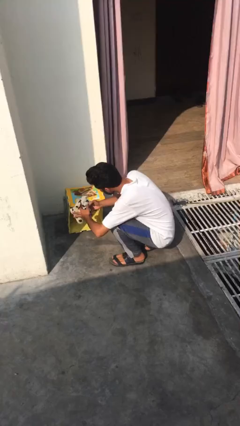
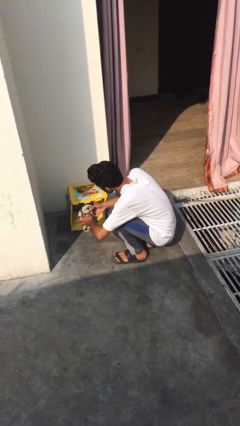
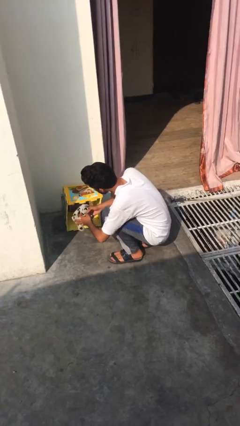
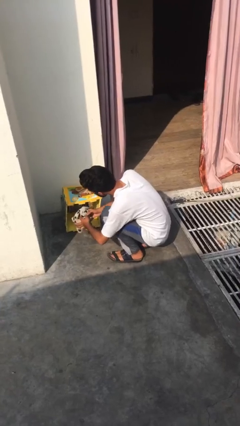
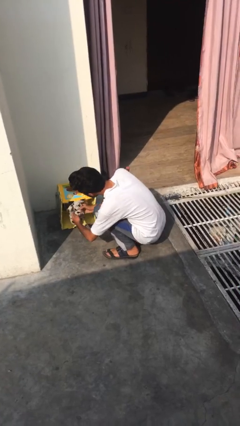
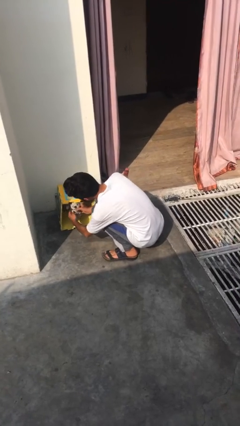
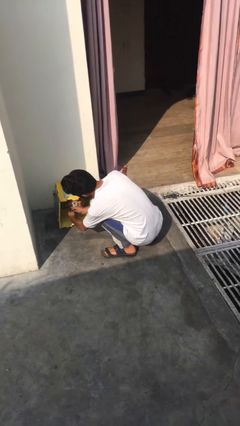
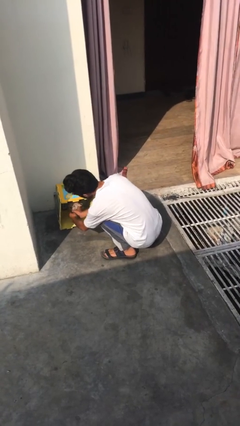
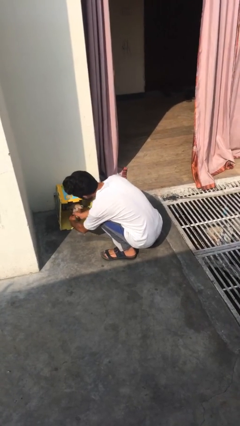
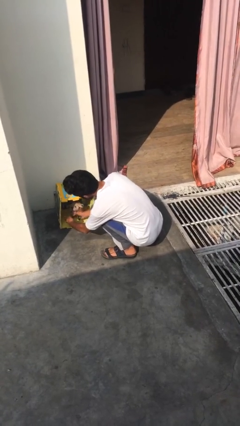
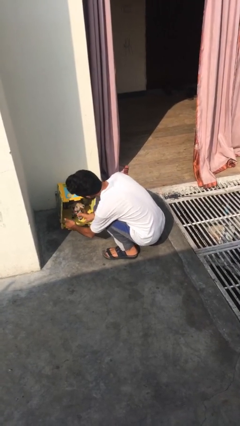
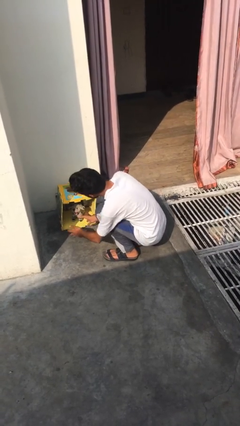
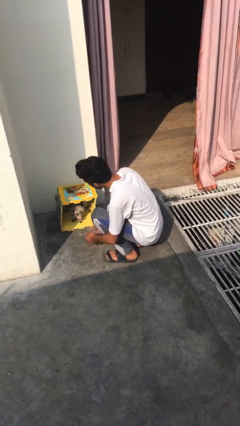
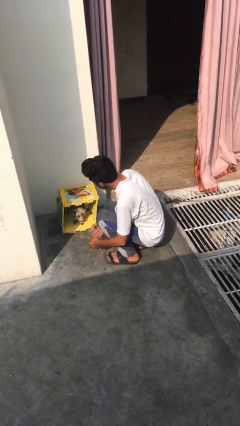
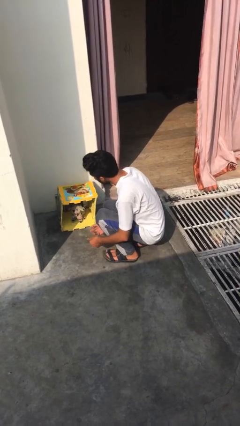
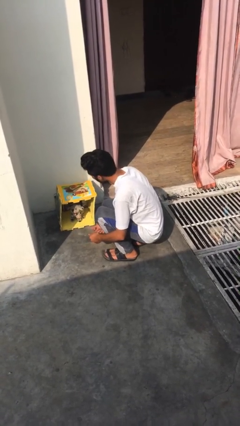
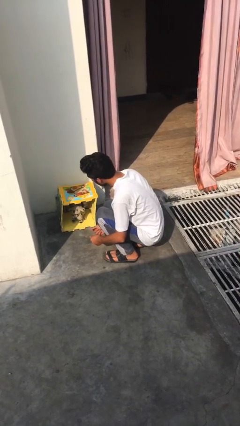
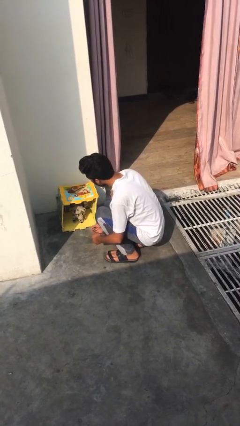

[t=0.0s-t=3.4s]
person crates dog

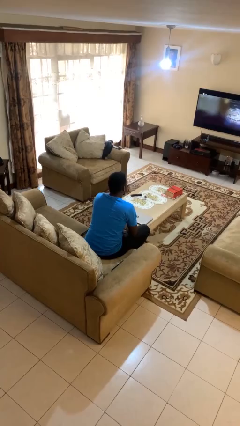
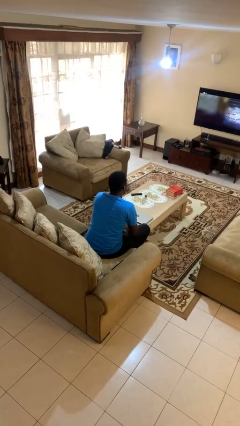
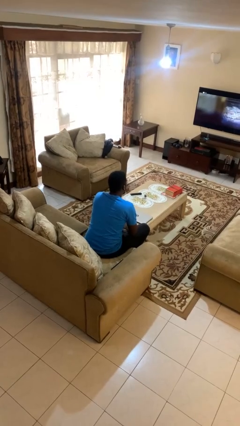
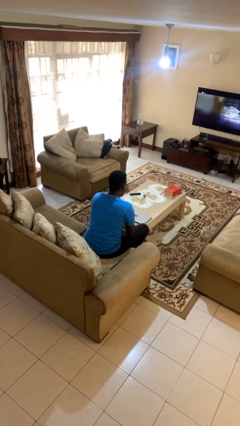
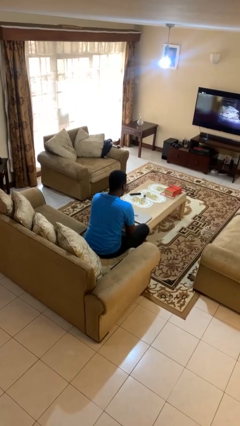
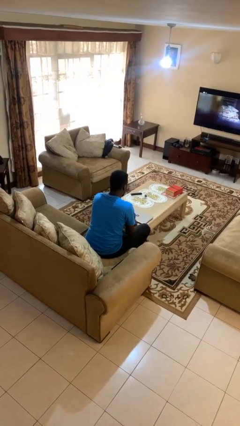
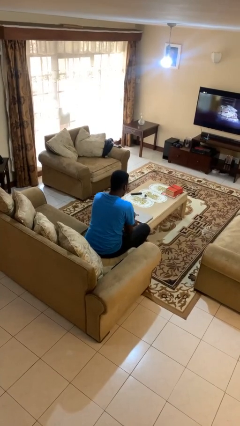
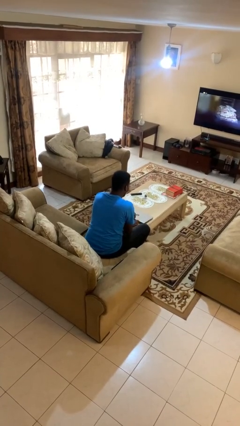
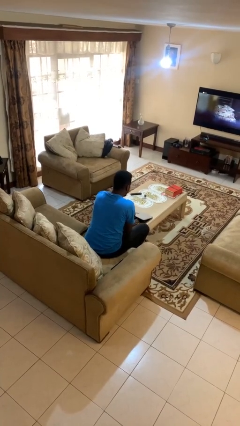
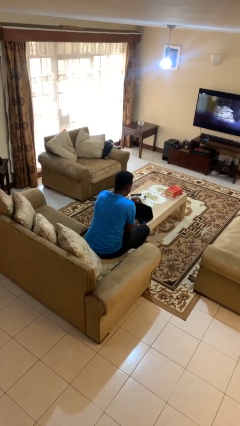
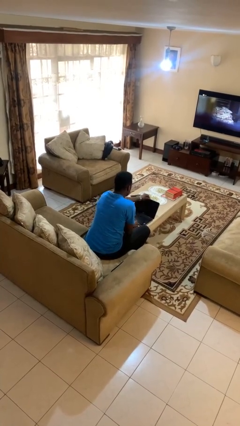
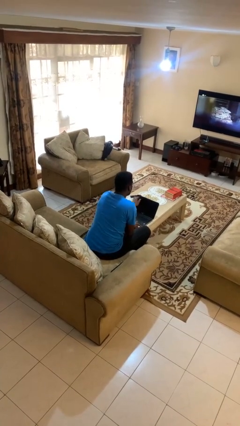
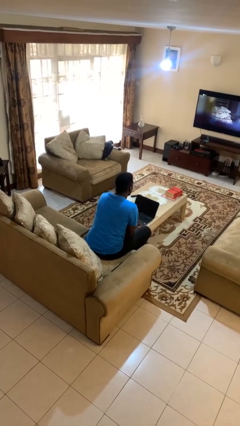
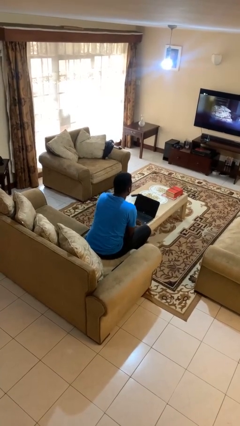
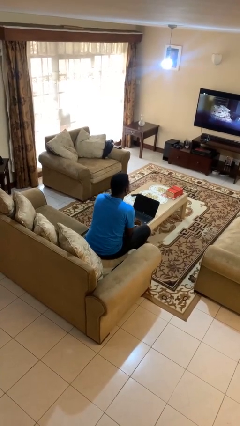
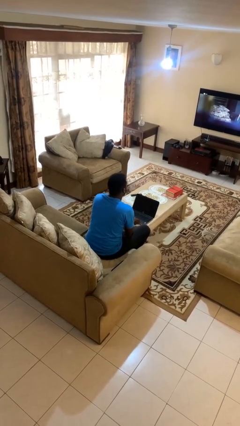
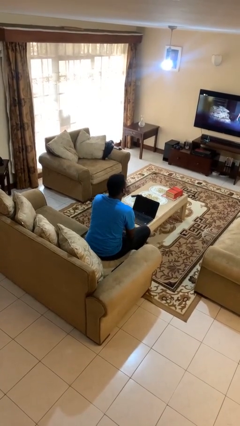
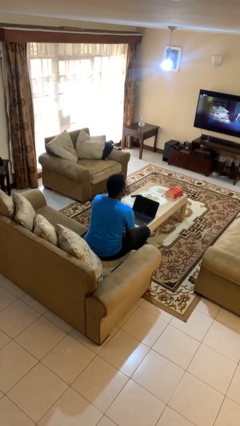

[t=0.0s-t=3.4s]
person opens laptop

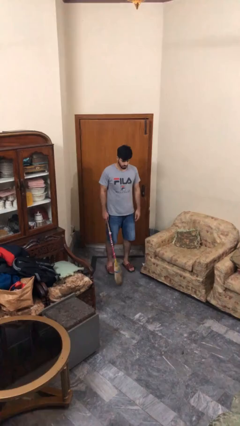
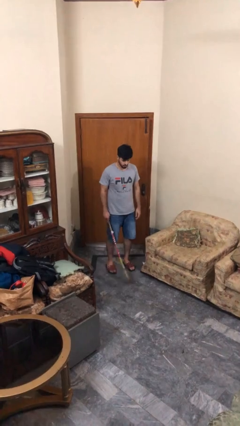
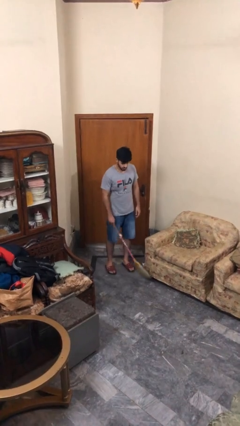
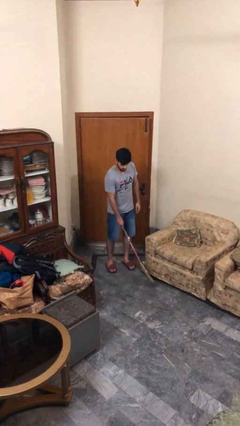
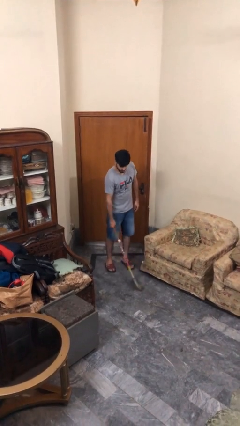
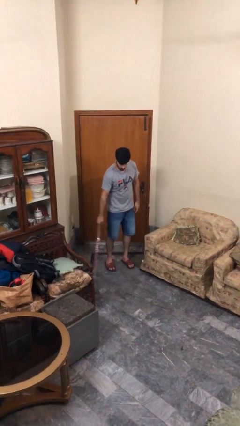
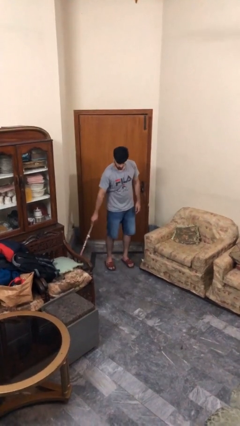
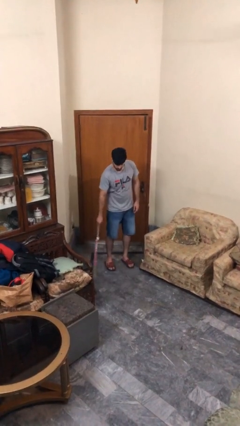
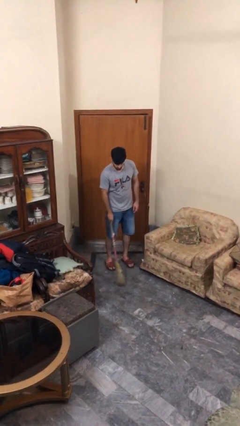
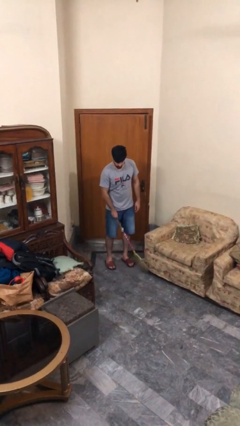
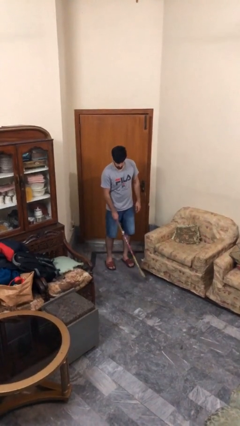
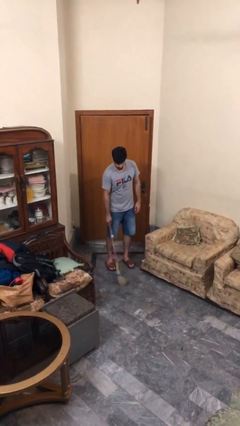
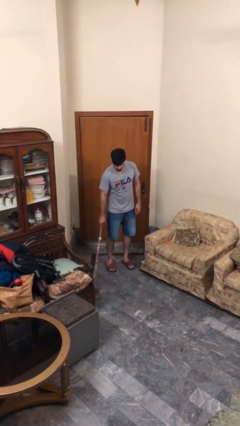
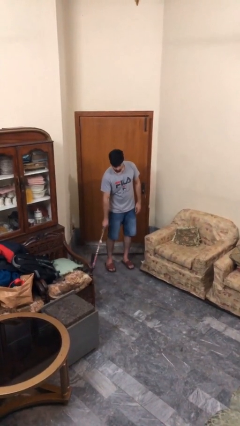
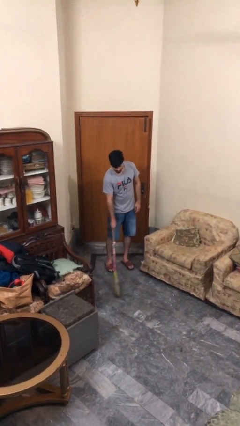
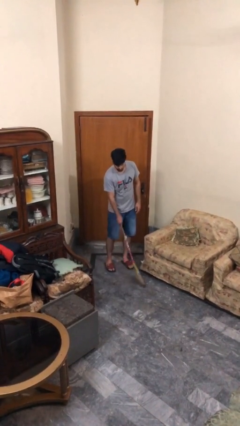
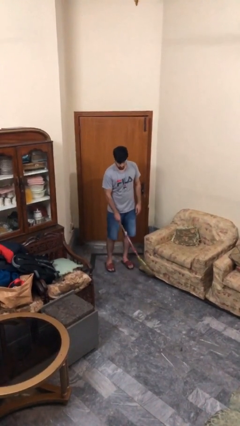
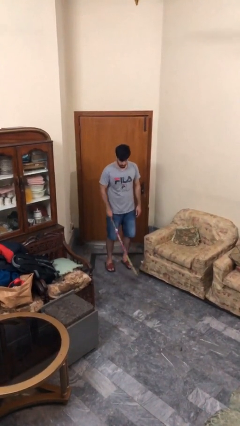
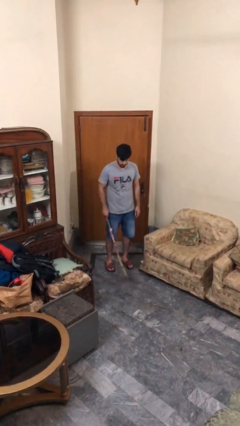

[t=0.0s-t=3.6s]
person sweeps floor

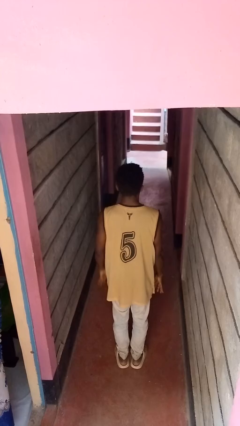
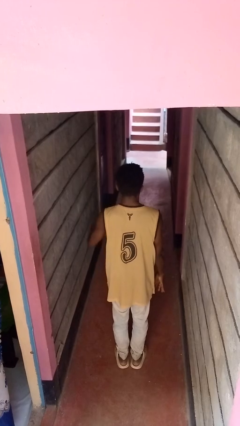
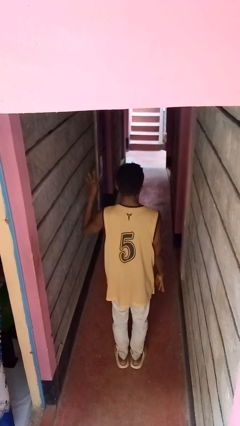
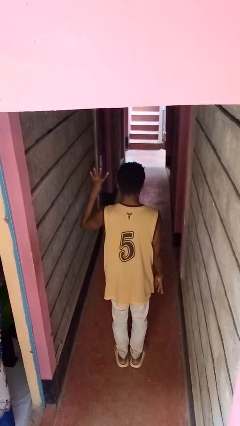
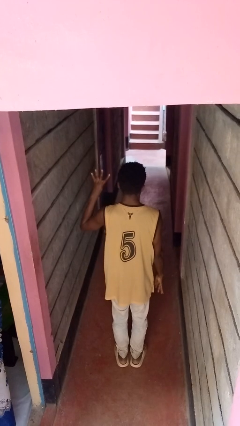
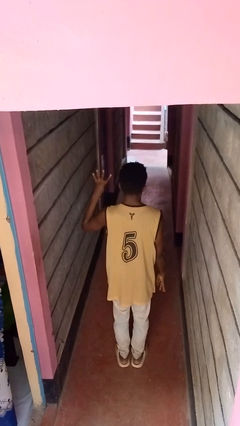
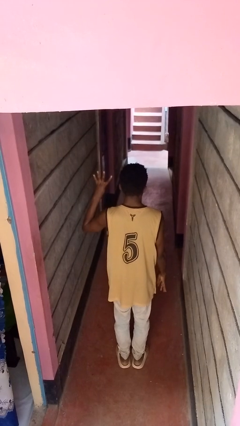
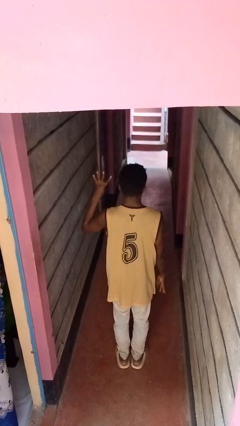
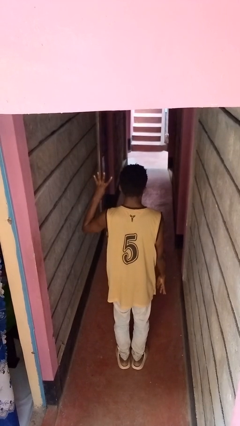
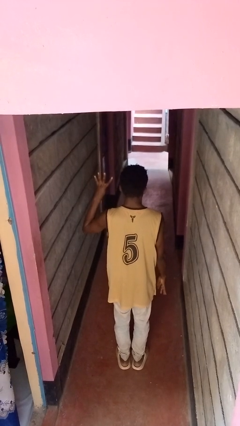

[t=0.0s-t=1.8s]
person gestures number four

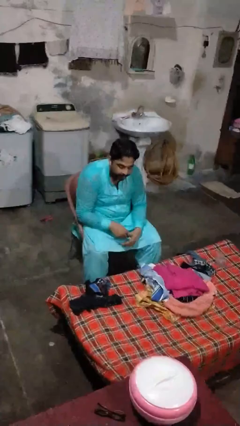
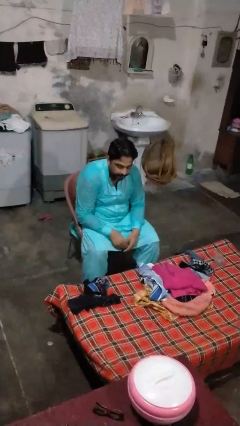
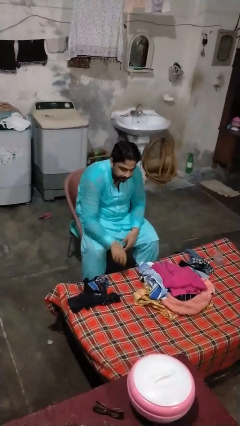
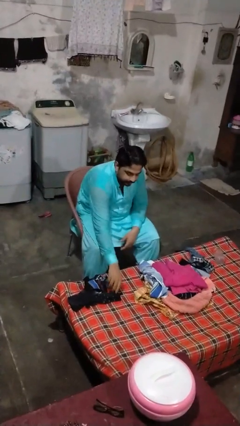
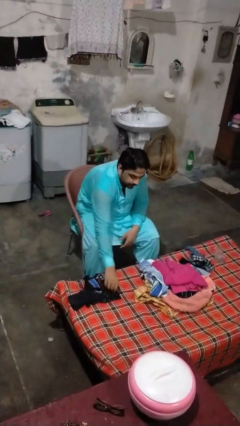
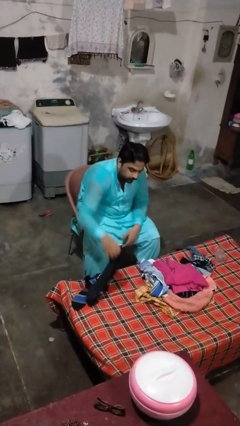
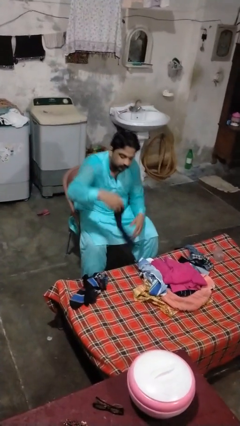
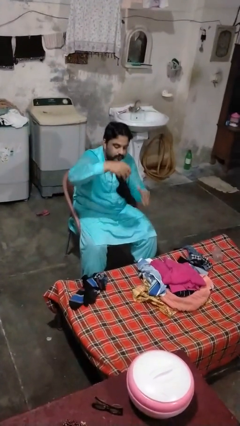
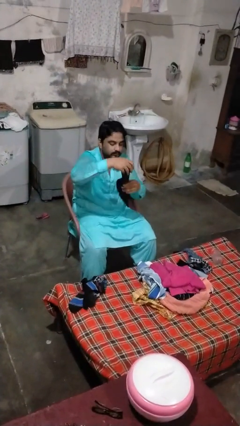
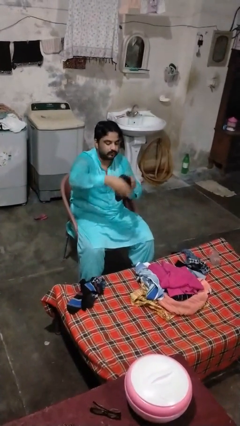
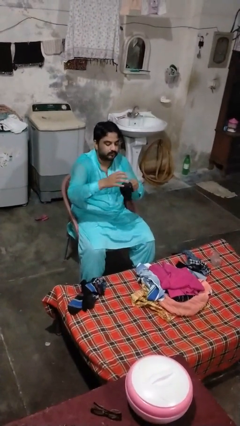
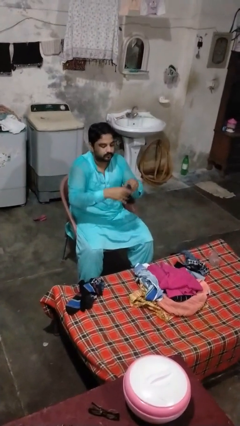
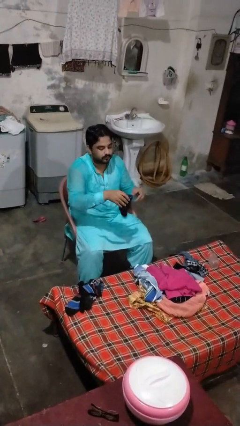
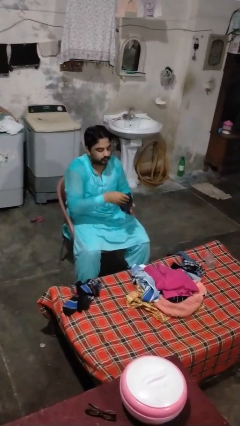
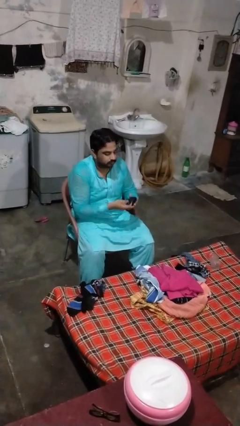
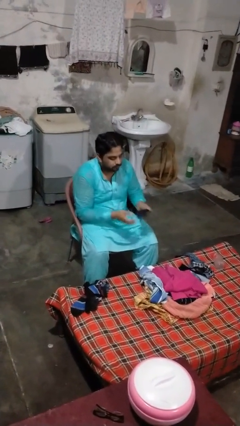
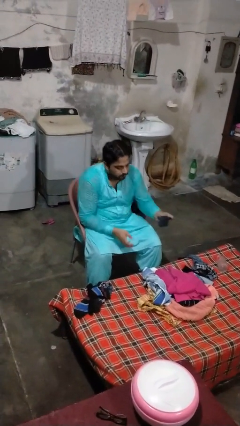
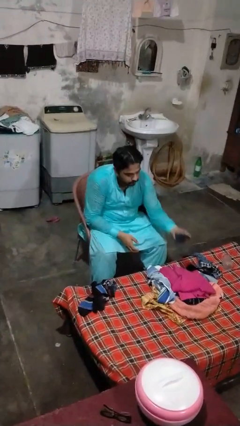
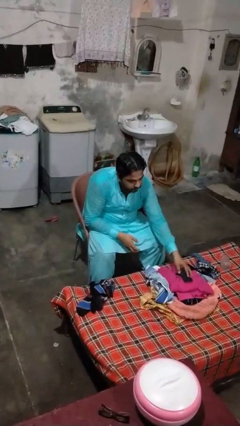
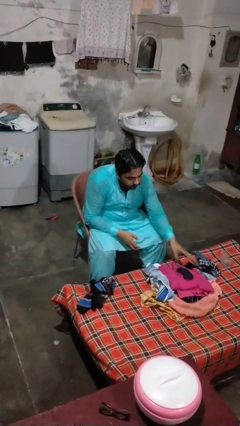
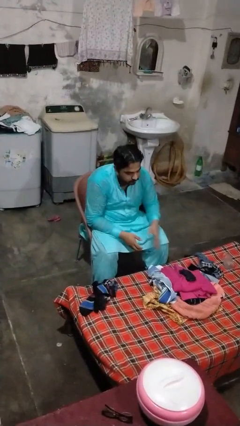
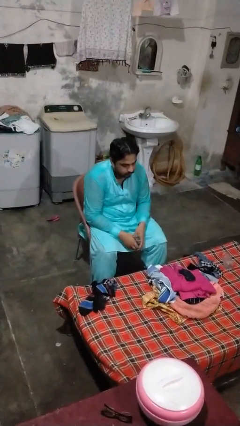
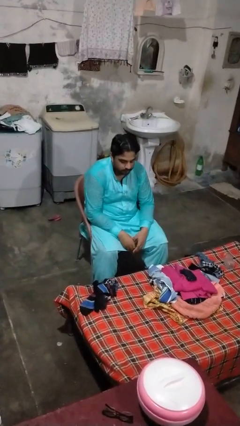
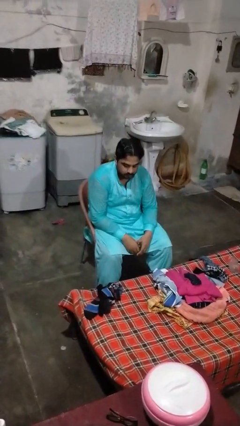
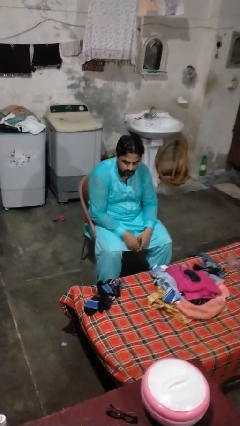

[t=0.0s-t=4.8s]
person folds socks

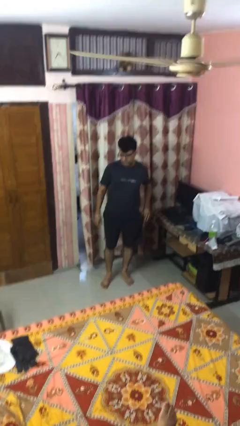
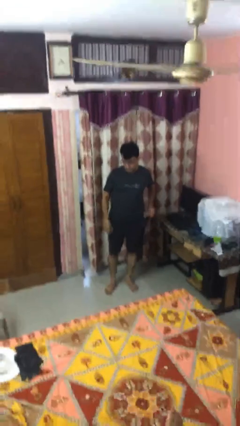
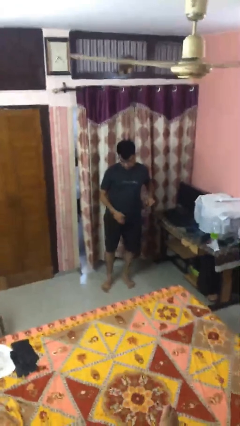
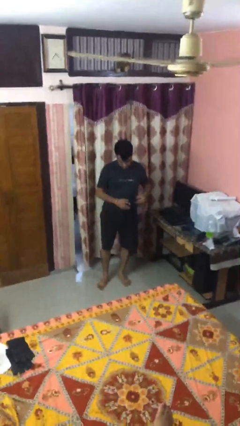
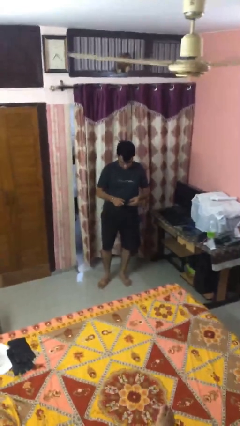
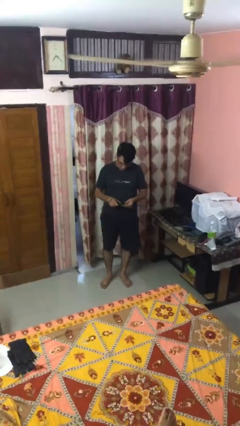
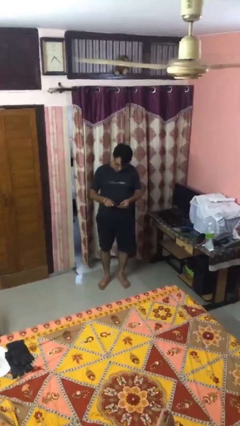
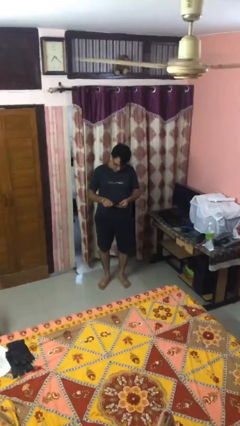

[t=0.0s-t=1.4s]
person takes phone from pocket
